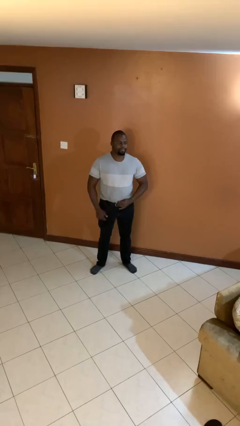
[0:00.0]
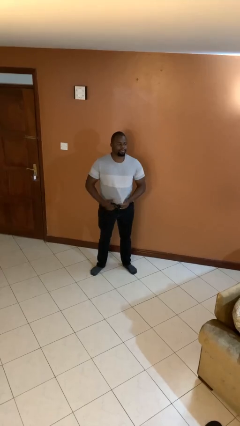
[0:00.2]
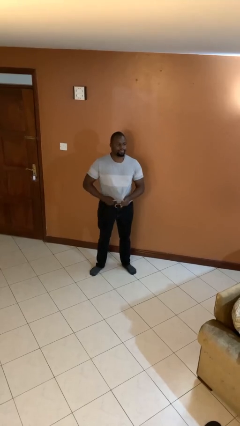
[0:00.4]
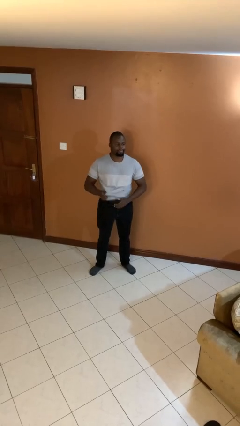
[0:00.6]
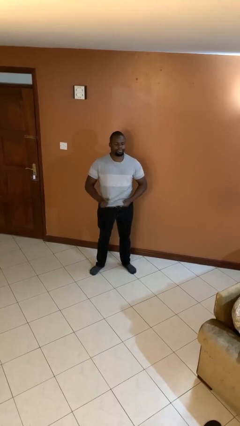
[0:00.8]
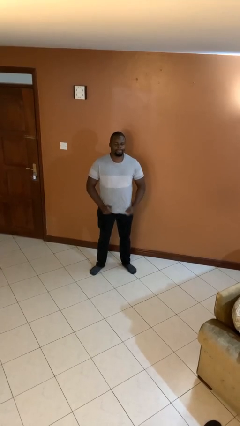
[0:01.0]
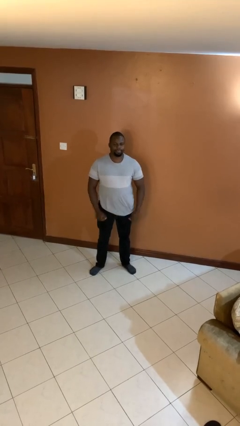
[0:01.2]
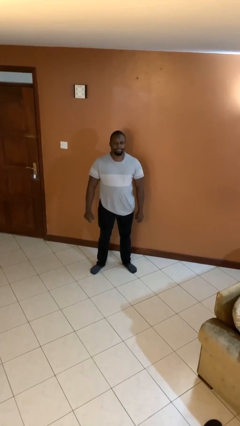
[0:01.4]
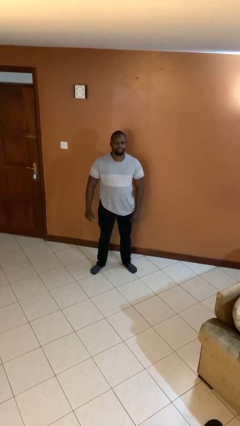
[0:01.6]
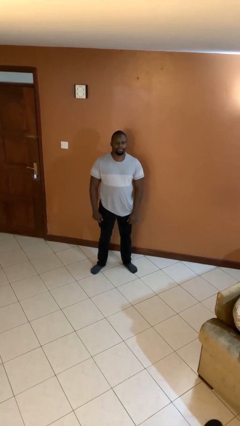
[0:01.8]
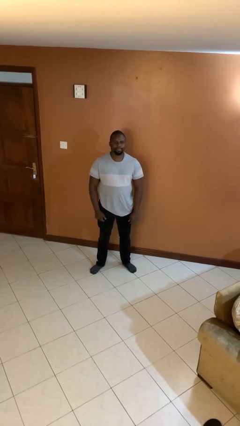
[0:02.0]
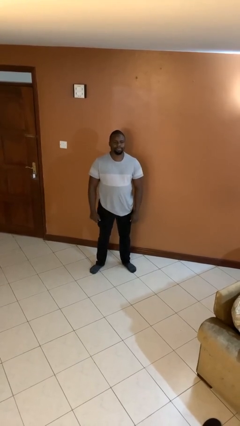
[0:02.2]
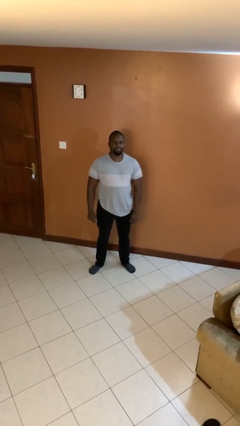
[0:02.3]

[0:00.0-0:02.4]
person untucks shirt

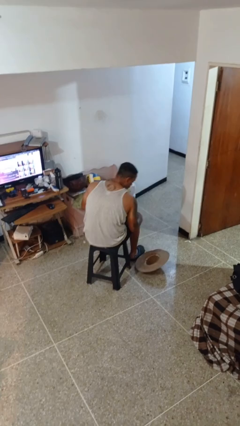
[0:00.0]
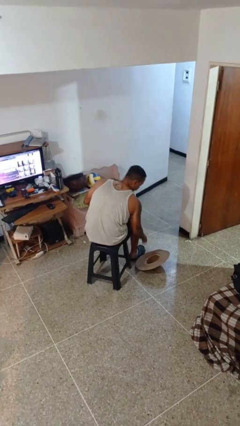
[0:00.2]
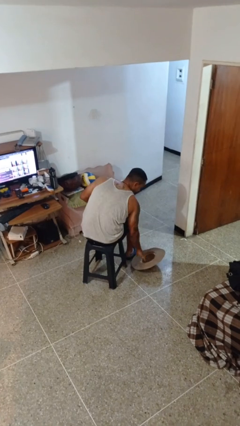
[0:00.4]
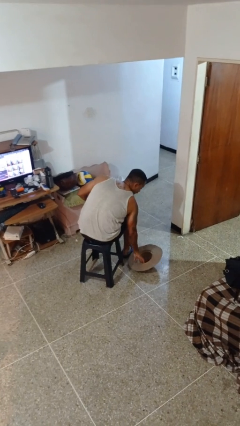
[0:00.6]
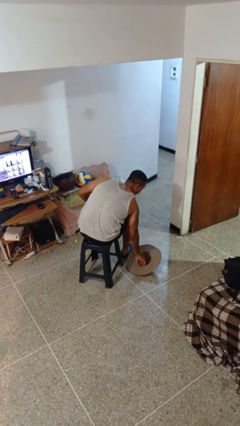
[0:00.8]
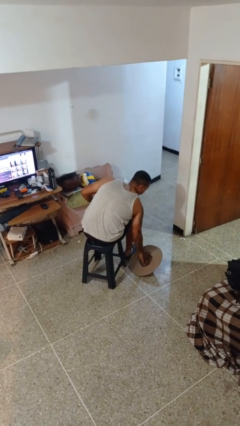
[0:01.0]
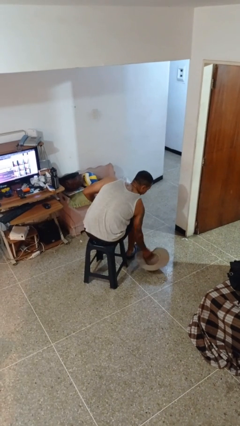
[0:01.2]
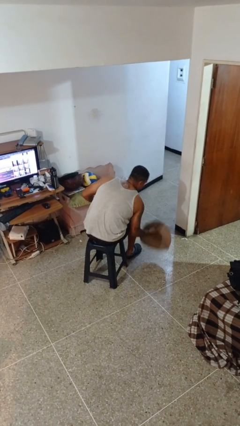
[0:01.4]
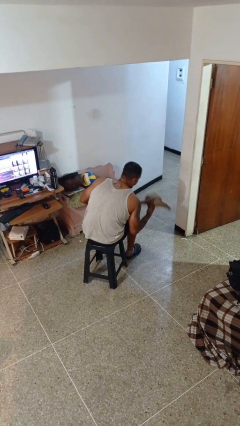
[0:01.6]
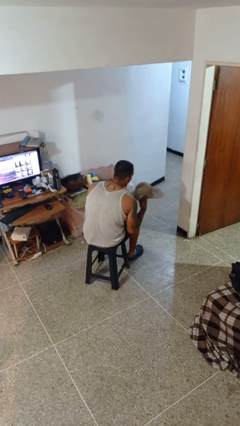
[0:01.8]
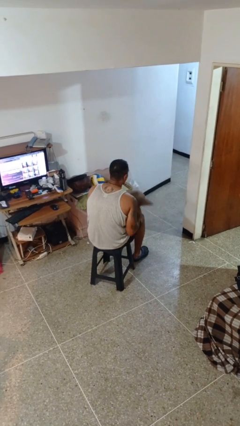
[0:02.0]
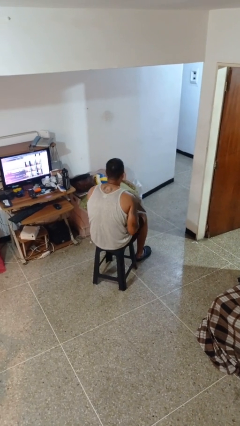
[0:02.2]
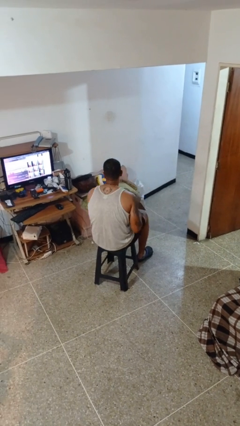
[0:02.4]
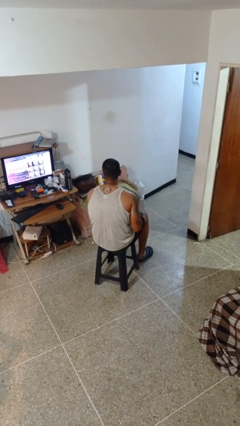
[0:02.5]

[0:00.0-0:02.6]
person picks up object from floor

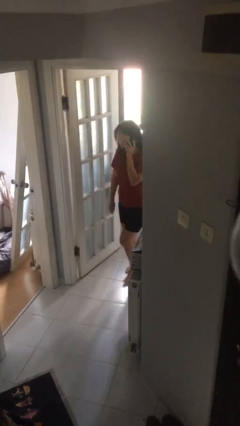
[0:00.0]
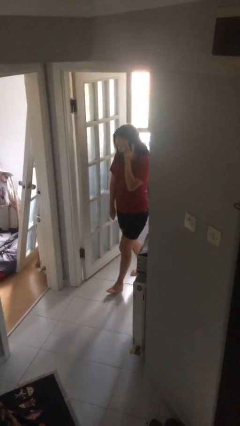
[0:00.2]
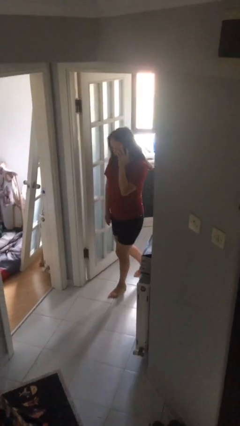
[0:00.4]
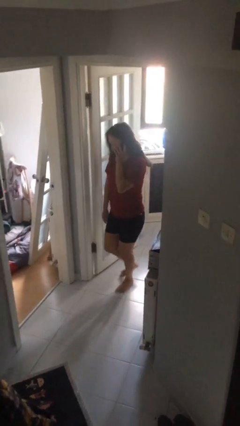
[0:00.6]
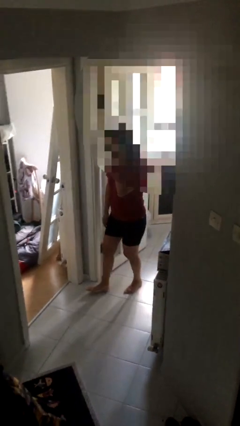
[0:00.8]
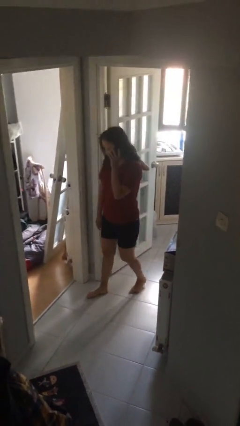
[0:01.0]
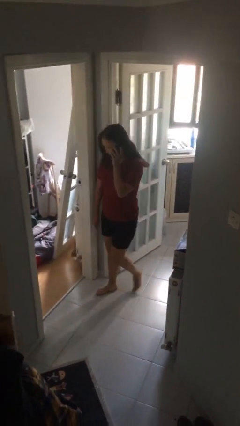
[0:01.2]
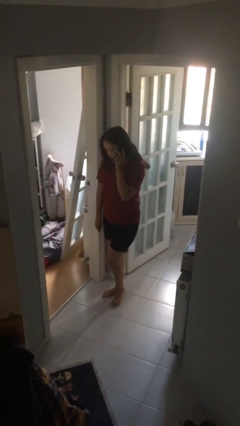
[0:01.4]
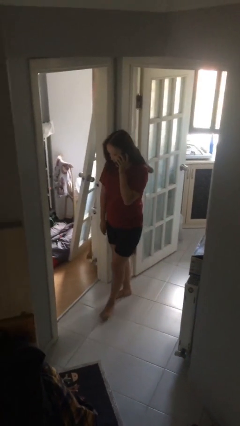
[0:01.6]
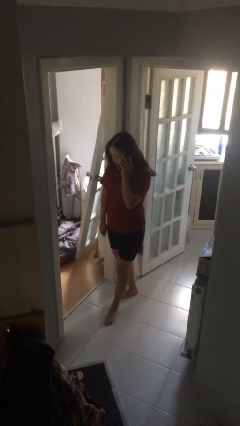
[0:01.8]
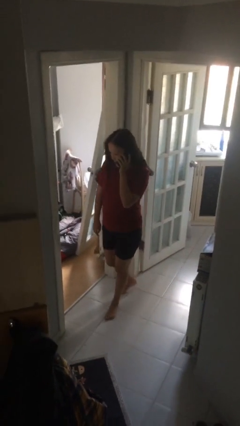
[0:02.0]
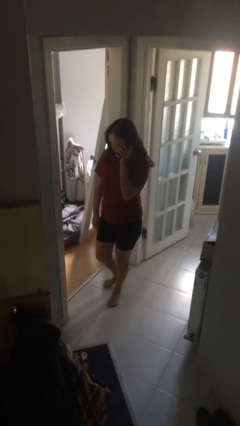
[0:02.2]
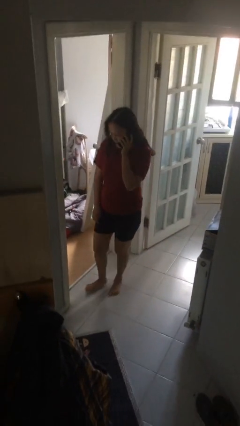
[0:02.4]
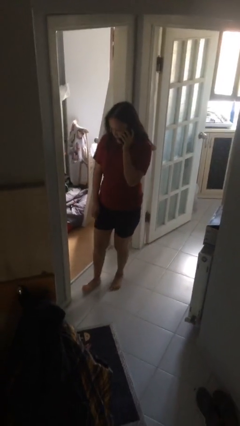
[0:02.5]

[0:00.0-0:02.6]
person enters scene through structure

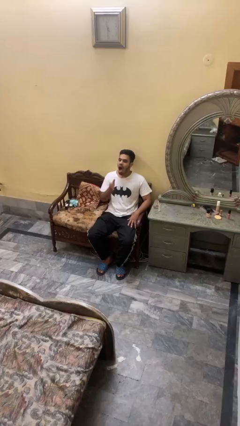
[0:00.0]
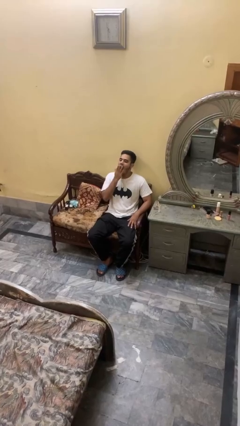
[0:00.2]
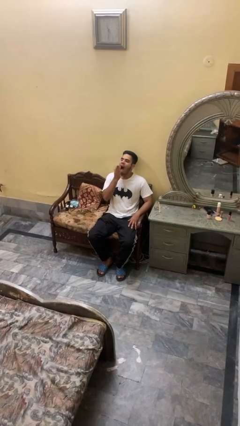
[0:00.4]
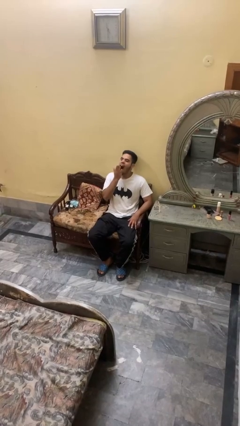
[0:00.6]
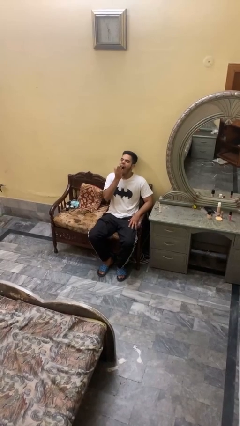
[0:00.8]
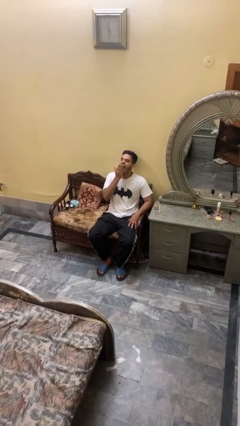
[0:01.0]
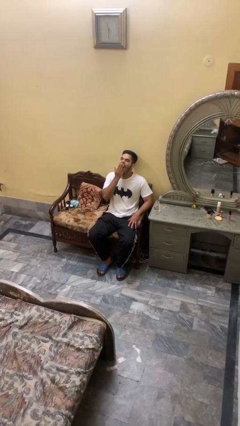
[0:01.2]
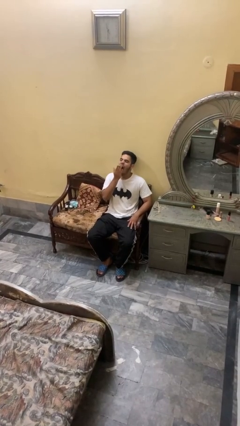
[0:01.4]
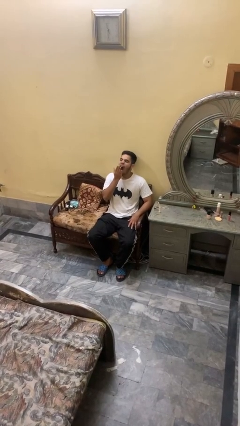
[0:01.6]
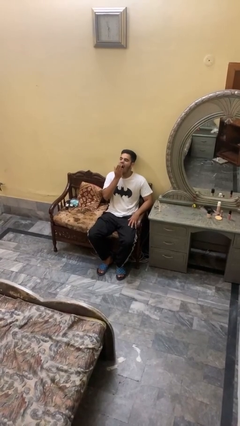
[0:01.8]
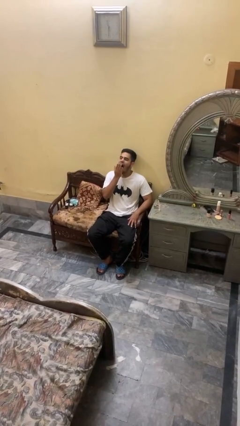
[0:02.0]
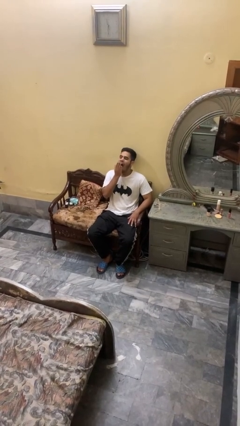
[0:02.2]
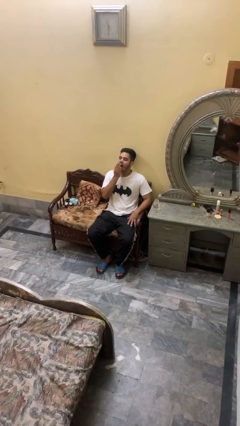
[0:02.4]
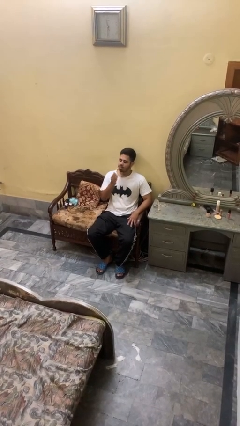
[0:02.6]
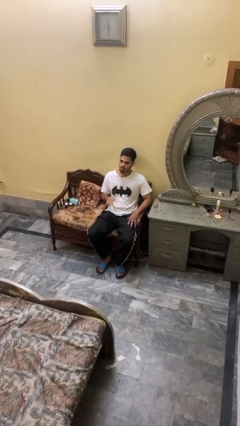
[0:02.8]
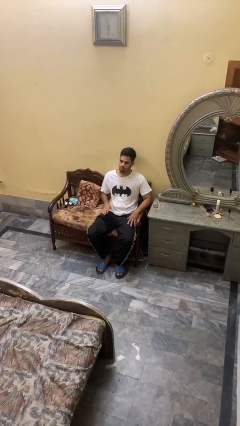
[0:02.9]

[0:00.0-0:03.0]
person yawns

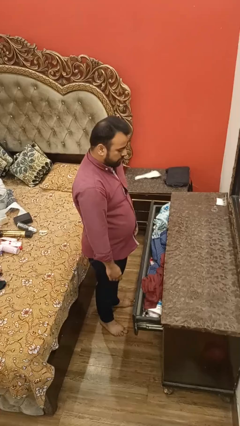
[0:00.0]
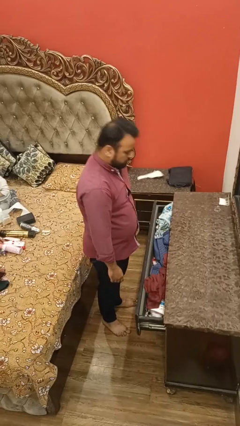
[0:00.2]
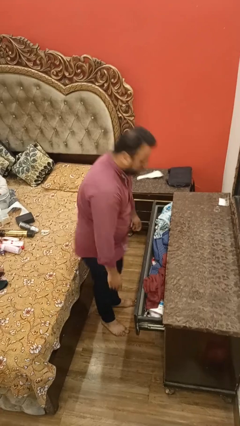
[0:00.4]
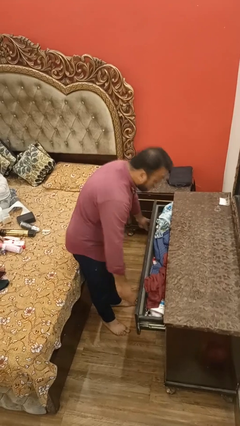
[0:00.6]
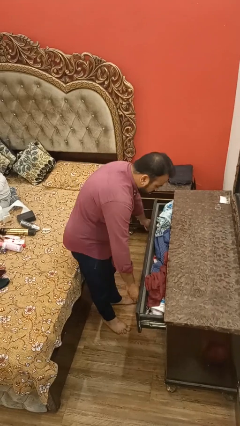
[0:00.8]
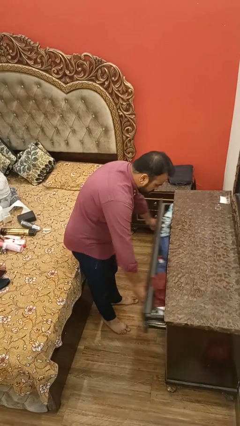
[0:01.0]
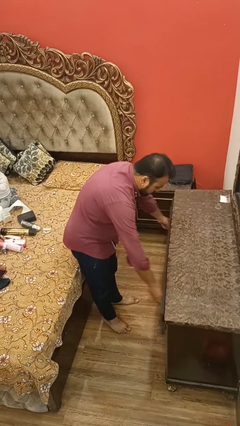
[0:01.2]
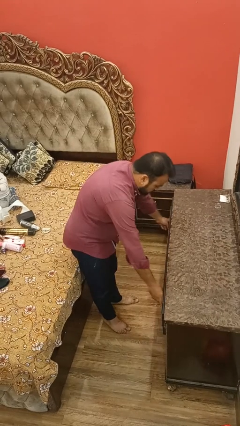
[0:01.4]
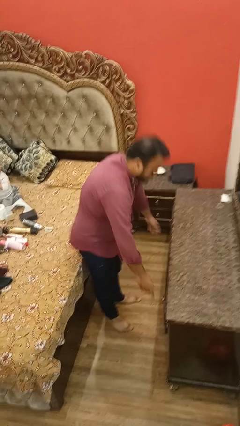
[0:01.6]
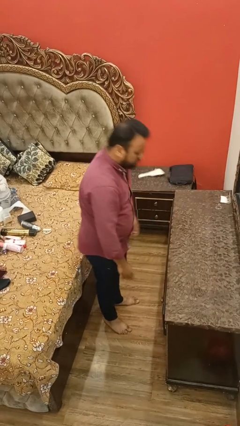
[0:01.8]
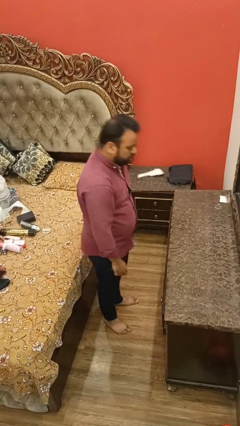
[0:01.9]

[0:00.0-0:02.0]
person closes dresser drawer

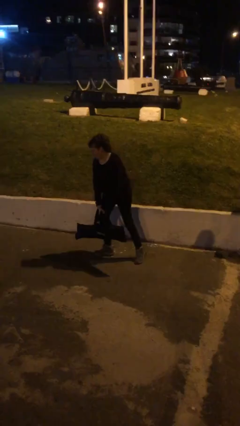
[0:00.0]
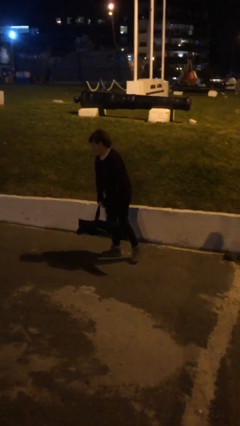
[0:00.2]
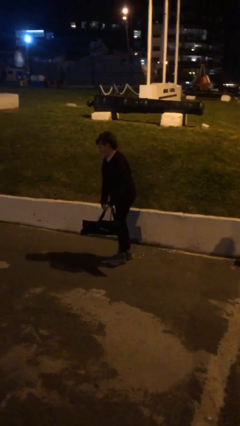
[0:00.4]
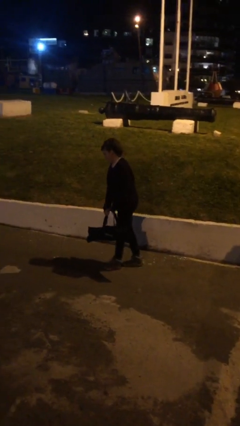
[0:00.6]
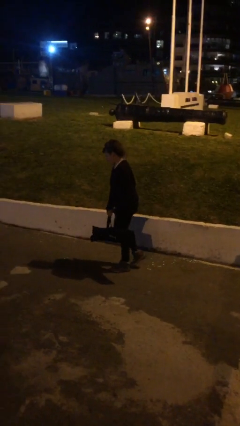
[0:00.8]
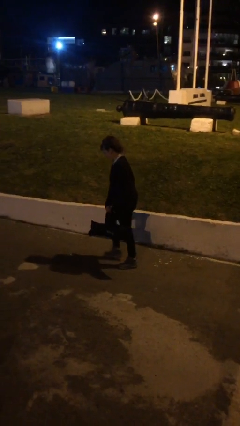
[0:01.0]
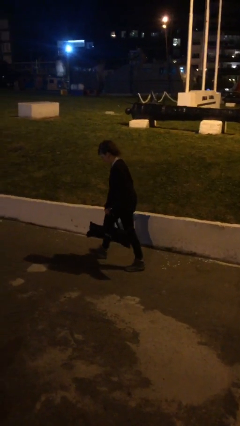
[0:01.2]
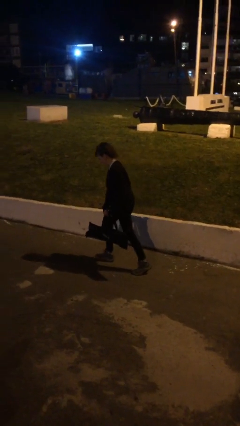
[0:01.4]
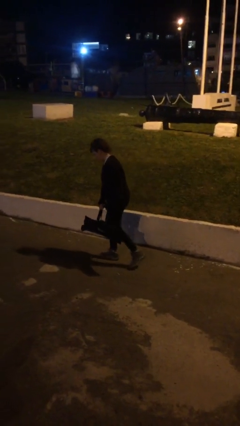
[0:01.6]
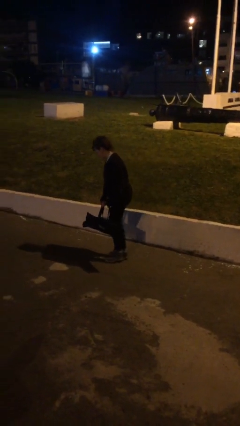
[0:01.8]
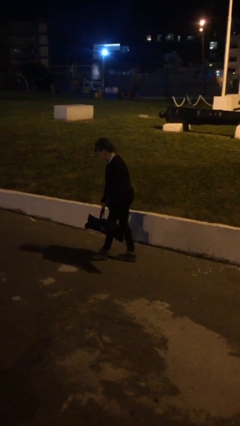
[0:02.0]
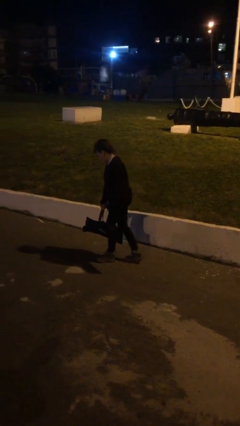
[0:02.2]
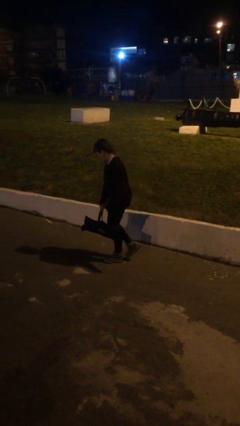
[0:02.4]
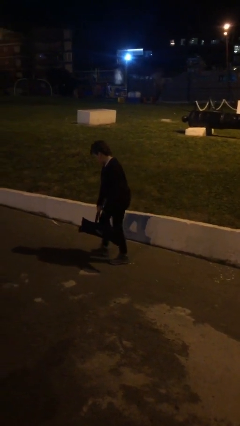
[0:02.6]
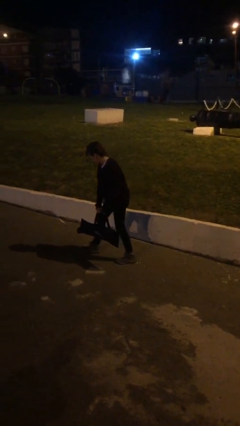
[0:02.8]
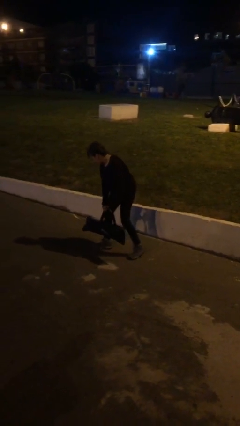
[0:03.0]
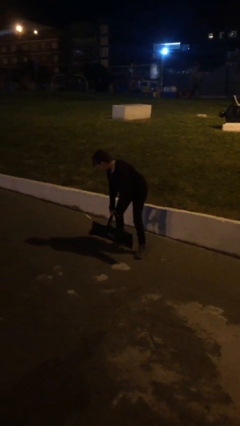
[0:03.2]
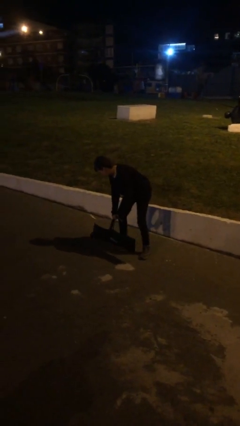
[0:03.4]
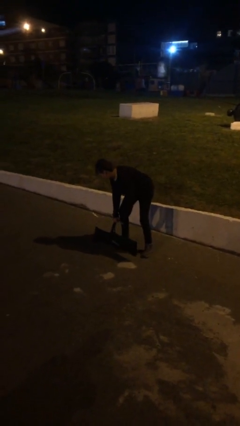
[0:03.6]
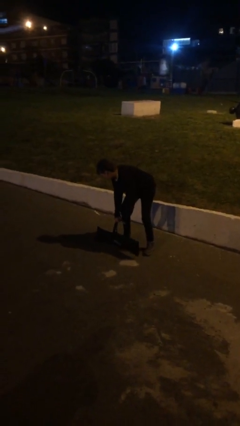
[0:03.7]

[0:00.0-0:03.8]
person carries heavy object

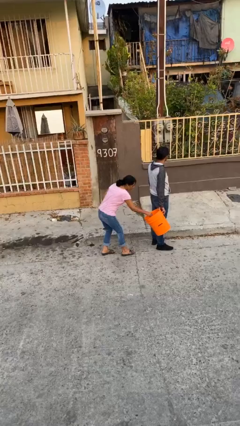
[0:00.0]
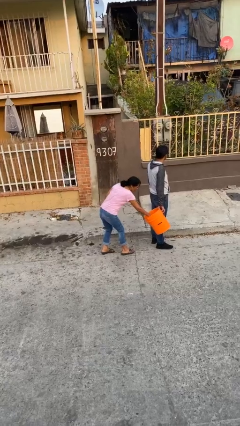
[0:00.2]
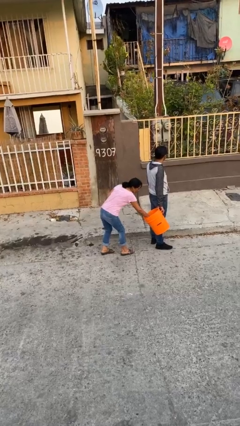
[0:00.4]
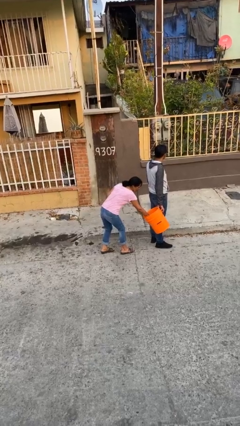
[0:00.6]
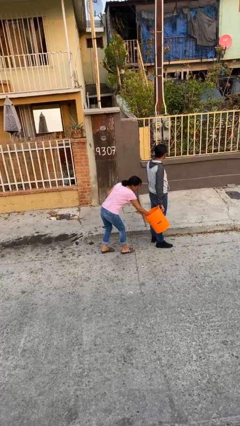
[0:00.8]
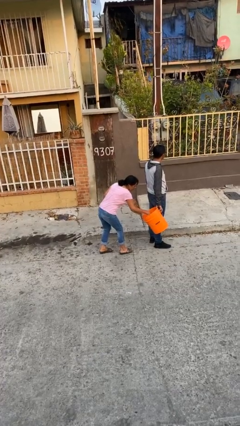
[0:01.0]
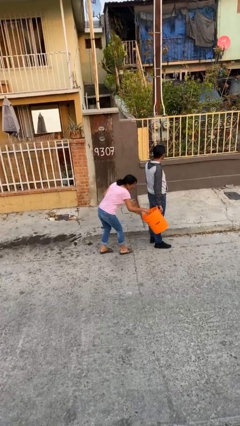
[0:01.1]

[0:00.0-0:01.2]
person steals object from person
